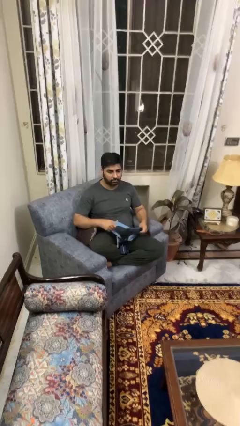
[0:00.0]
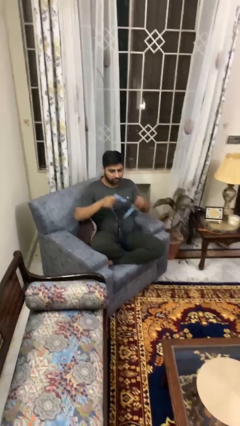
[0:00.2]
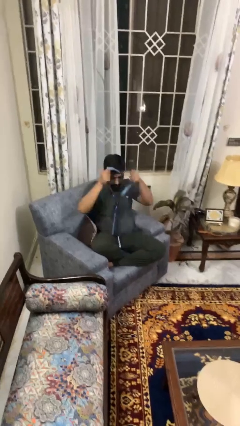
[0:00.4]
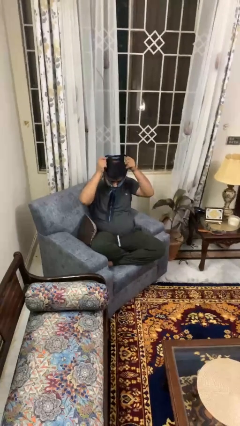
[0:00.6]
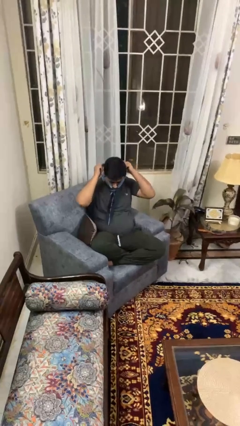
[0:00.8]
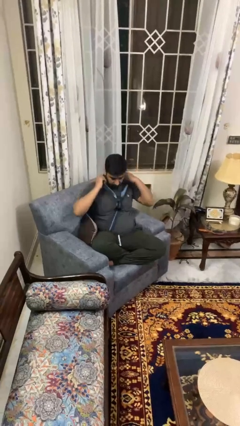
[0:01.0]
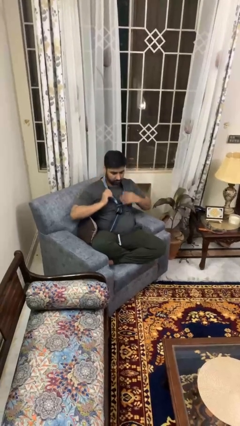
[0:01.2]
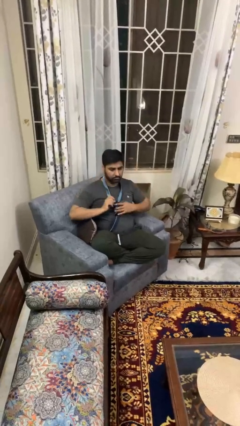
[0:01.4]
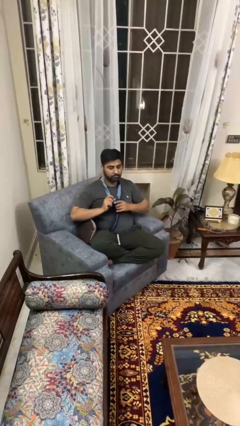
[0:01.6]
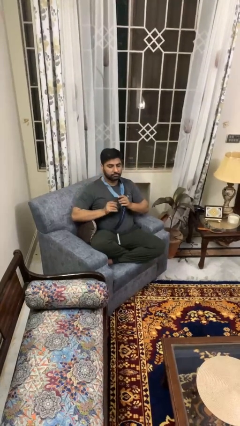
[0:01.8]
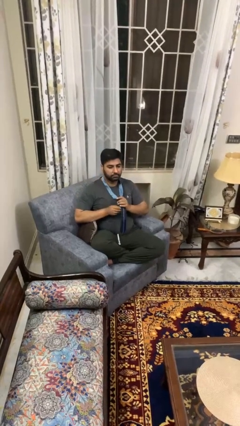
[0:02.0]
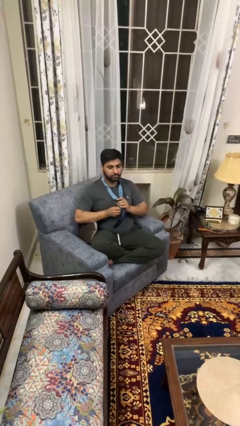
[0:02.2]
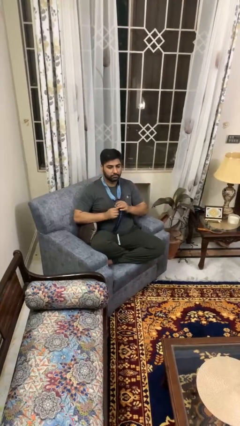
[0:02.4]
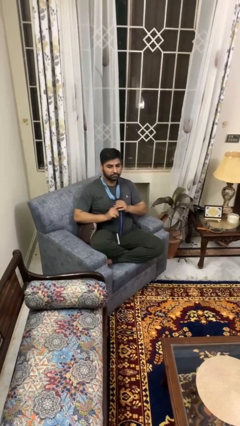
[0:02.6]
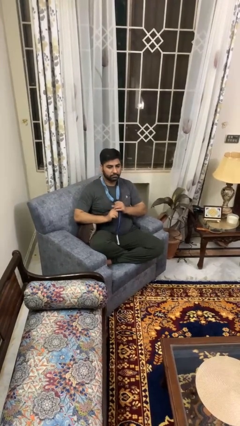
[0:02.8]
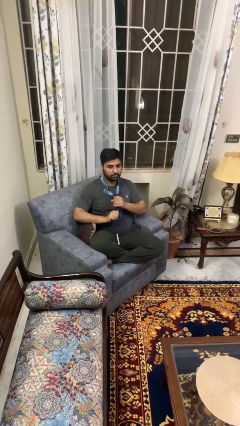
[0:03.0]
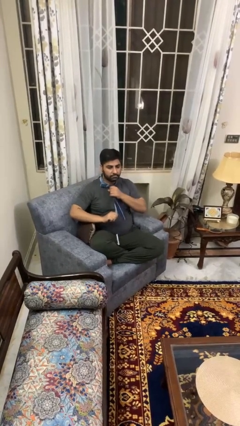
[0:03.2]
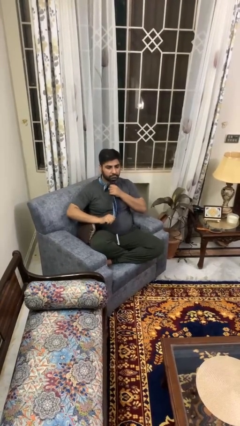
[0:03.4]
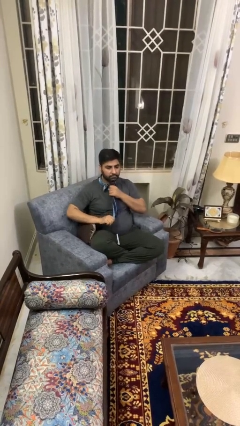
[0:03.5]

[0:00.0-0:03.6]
person puts on necktie

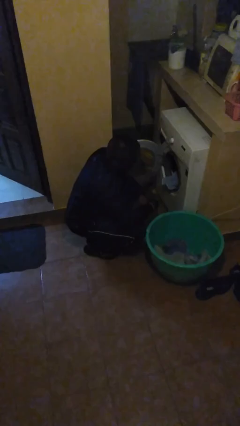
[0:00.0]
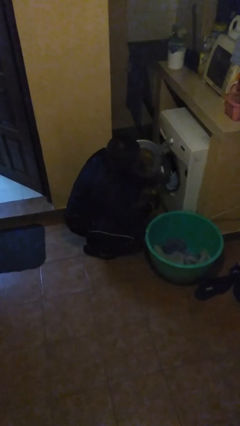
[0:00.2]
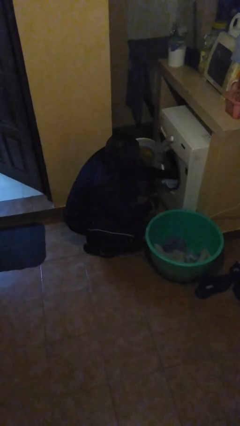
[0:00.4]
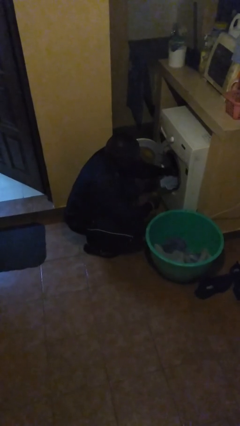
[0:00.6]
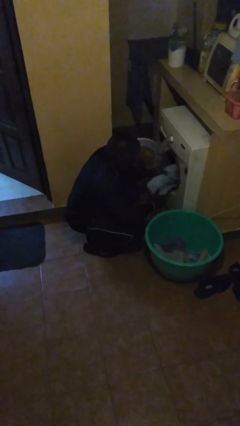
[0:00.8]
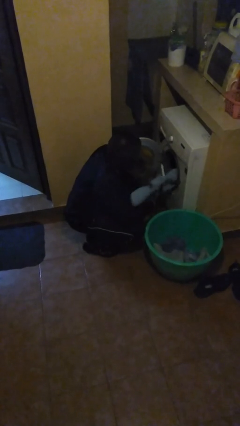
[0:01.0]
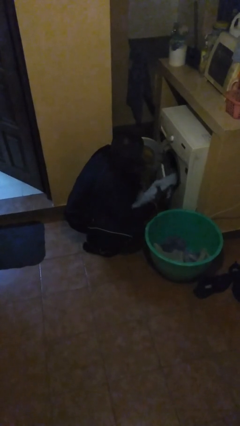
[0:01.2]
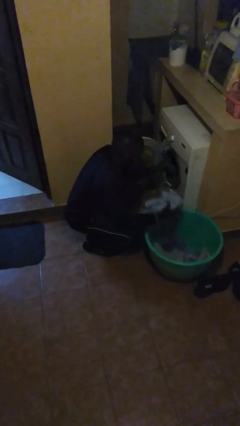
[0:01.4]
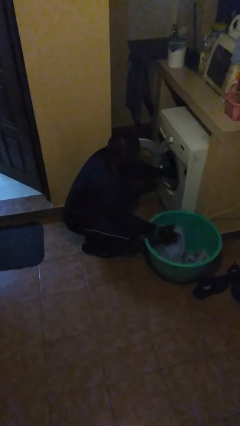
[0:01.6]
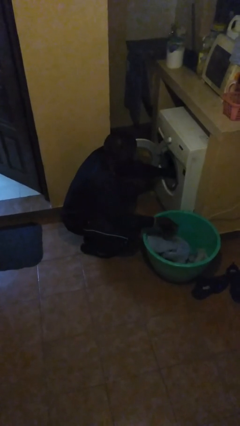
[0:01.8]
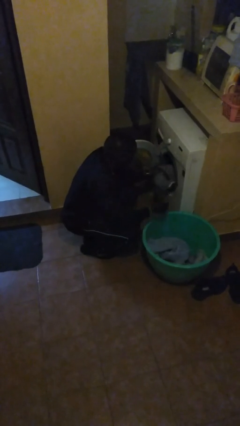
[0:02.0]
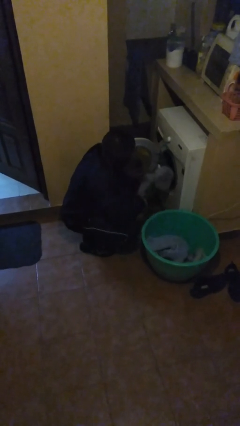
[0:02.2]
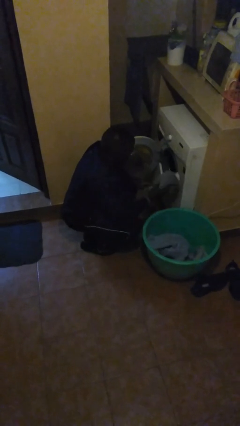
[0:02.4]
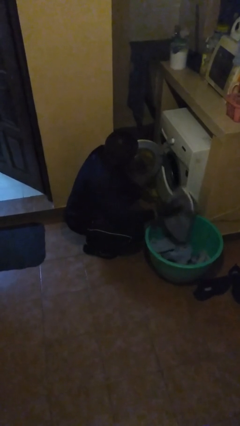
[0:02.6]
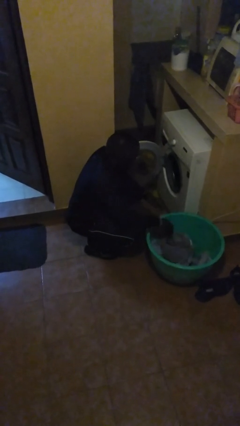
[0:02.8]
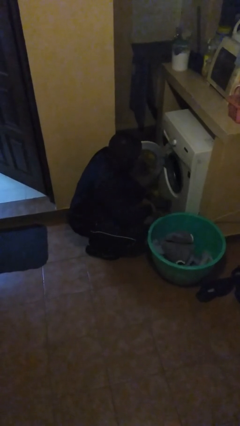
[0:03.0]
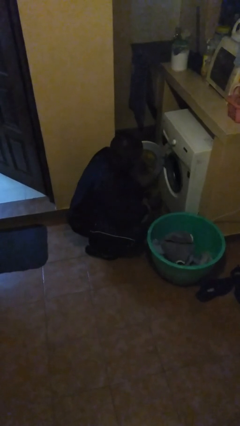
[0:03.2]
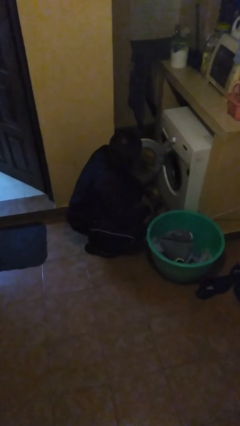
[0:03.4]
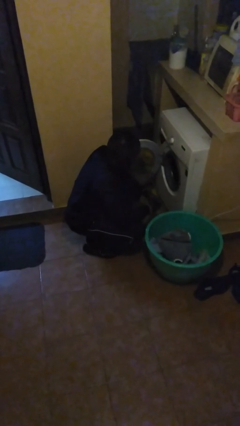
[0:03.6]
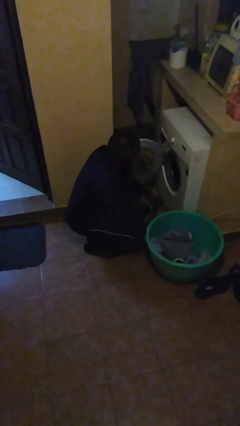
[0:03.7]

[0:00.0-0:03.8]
person loads clotheswasher

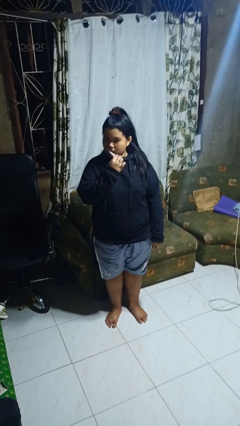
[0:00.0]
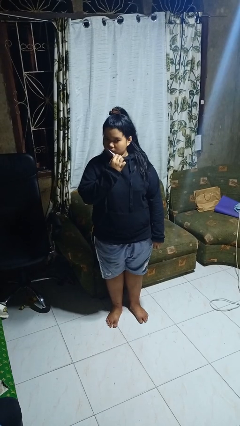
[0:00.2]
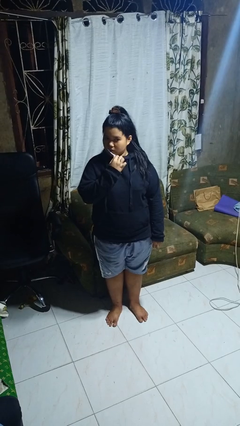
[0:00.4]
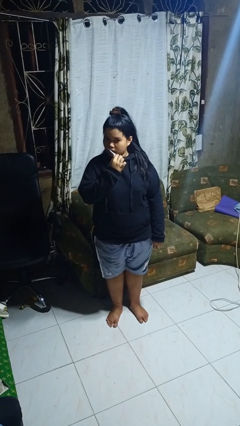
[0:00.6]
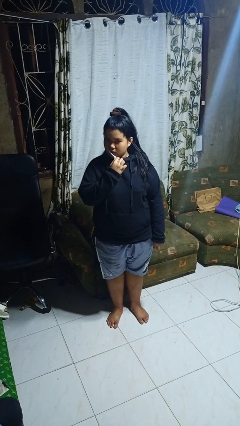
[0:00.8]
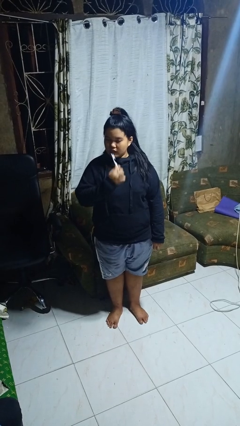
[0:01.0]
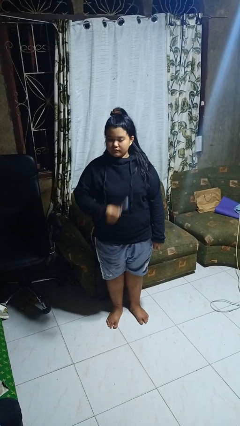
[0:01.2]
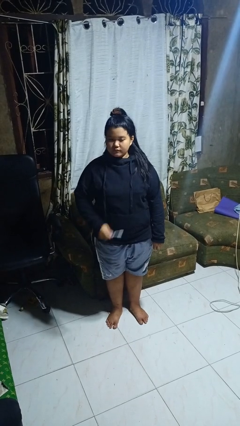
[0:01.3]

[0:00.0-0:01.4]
person brushes teeth

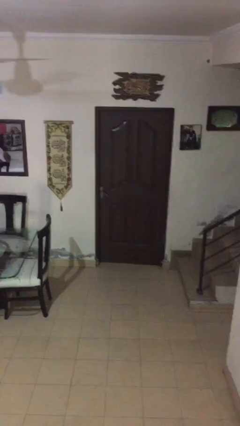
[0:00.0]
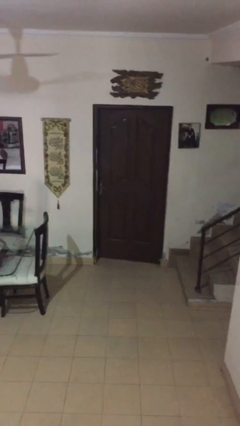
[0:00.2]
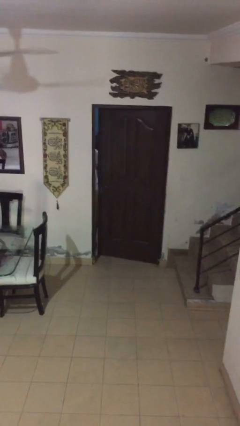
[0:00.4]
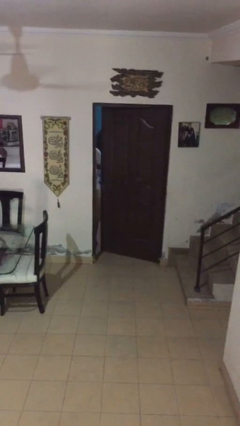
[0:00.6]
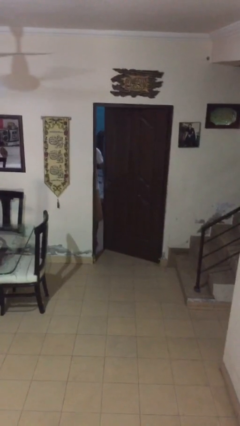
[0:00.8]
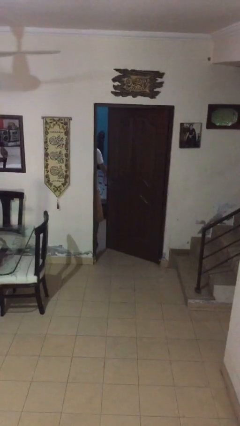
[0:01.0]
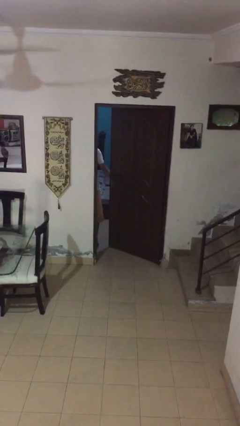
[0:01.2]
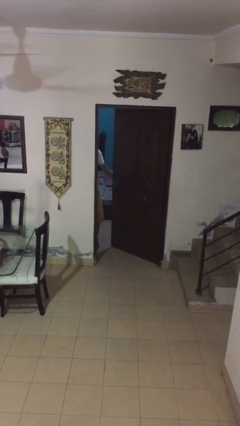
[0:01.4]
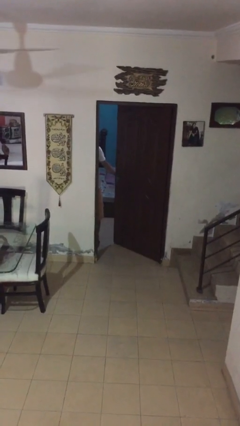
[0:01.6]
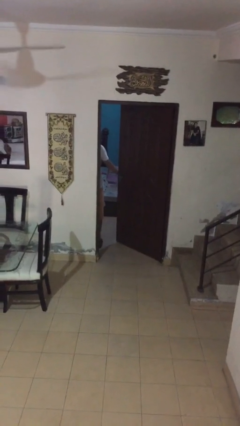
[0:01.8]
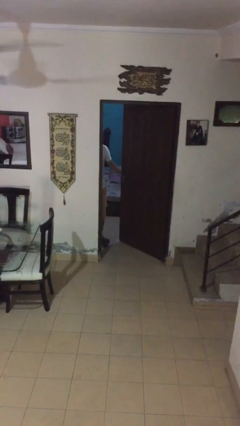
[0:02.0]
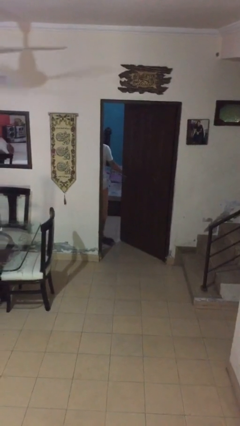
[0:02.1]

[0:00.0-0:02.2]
person opens facility door

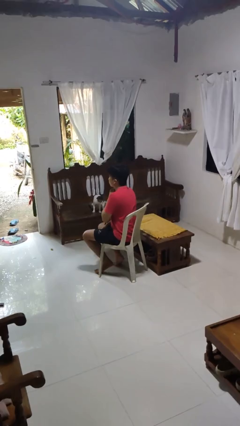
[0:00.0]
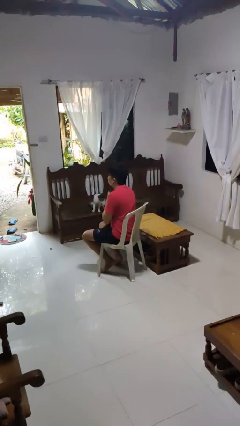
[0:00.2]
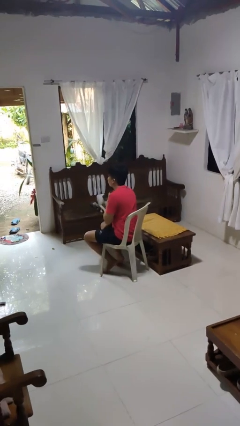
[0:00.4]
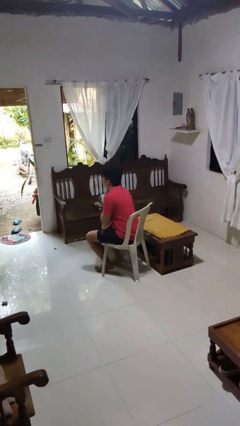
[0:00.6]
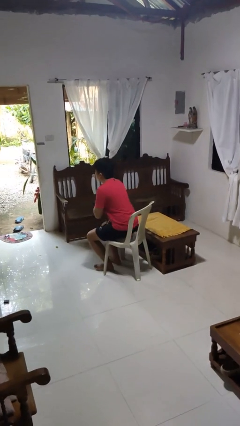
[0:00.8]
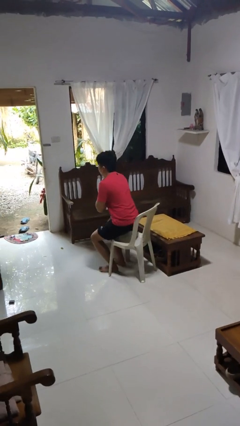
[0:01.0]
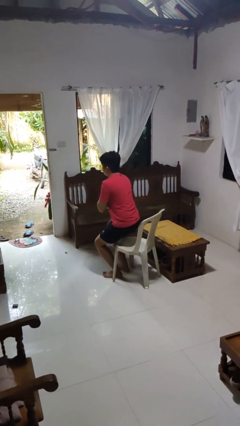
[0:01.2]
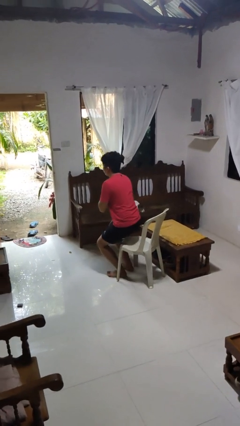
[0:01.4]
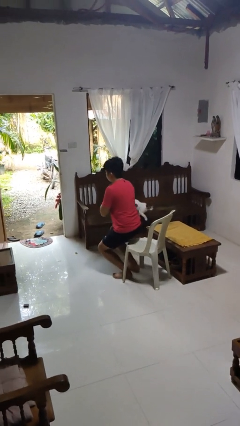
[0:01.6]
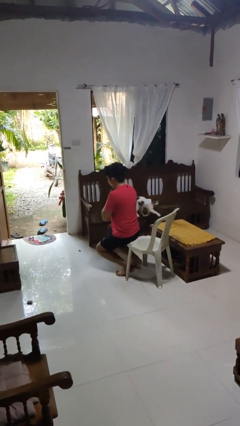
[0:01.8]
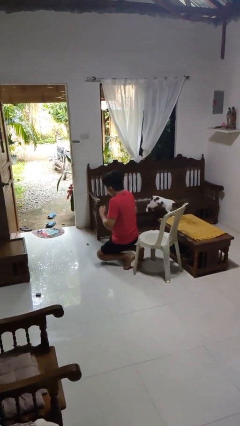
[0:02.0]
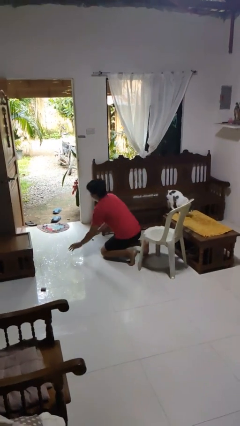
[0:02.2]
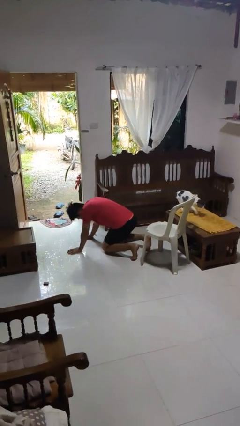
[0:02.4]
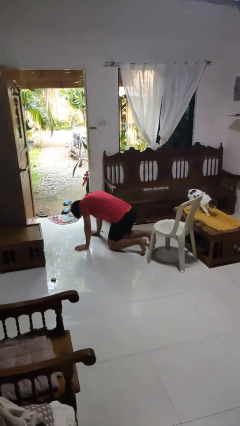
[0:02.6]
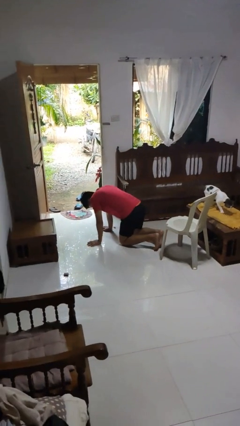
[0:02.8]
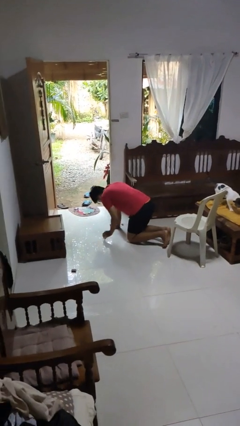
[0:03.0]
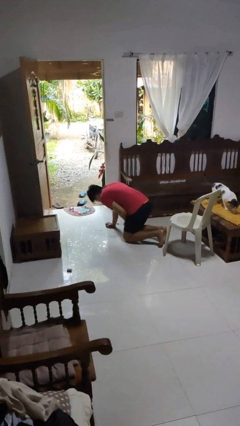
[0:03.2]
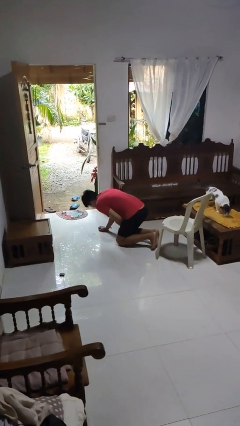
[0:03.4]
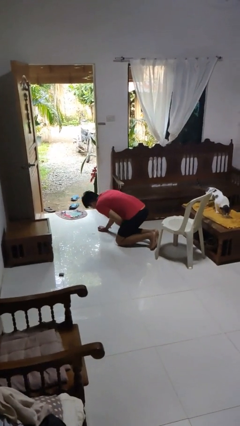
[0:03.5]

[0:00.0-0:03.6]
person falls from chair

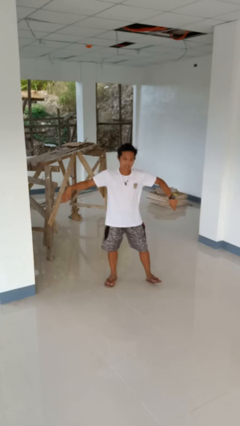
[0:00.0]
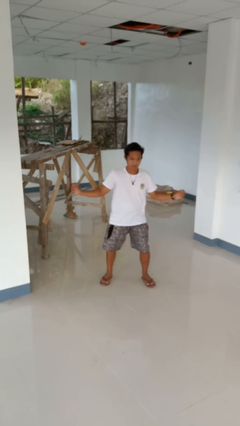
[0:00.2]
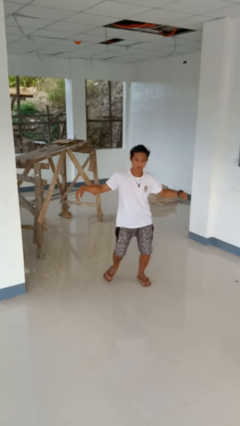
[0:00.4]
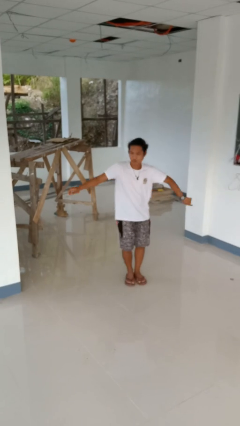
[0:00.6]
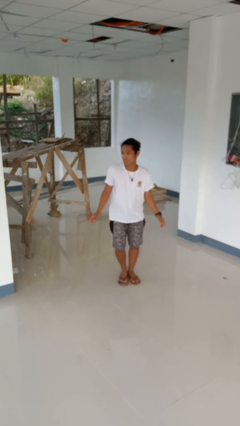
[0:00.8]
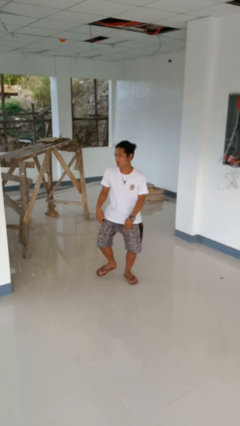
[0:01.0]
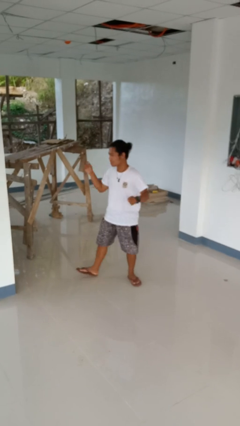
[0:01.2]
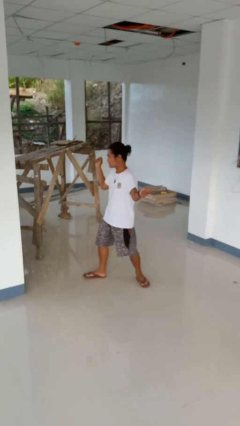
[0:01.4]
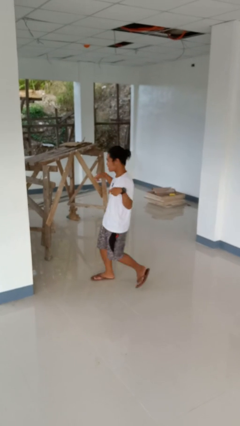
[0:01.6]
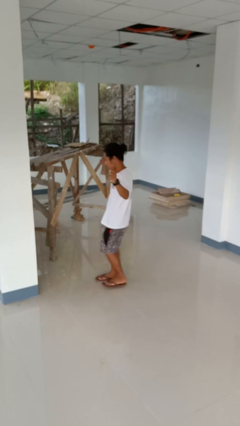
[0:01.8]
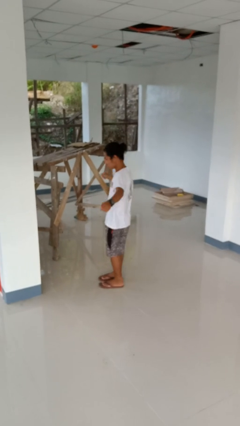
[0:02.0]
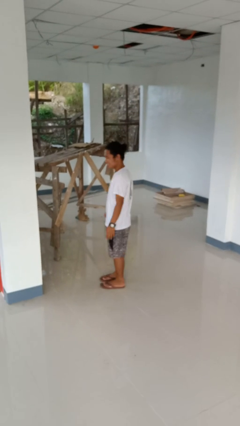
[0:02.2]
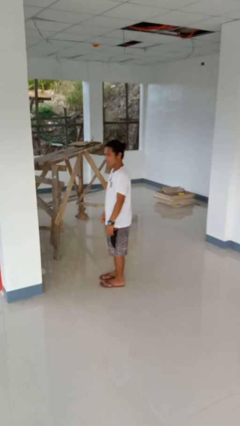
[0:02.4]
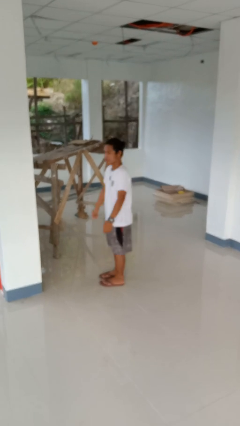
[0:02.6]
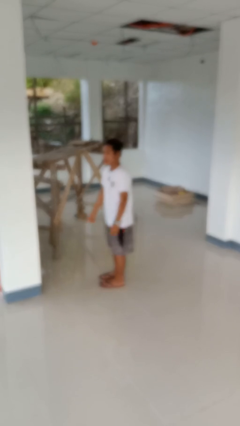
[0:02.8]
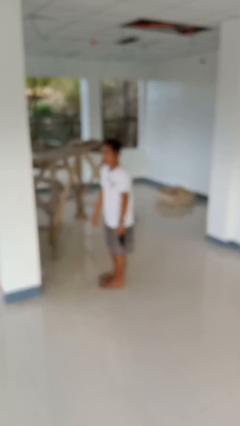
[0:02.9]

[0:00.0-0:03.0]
person dances in place
